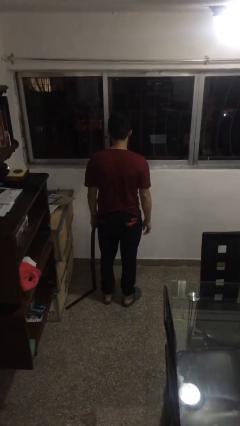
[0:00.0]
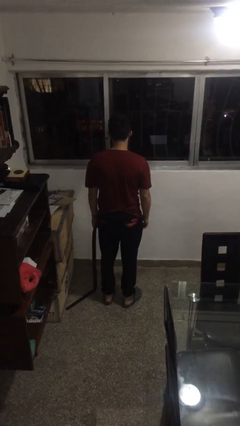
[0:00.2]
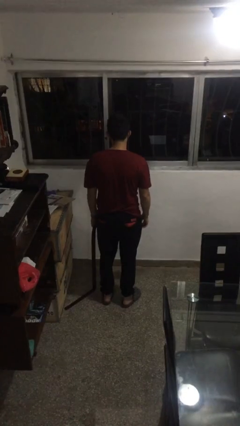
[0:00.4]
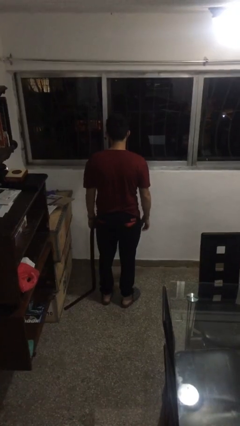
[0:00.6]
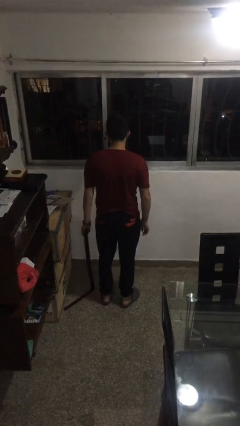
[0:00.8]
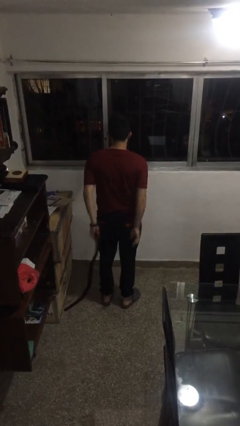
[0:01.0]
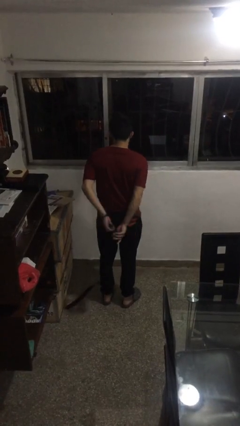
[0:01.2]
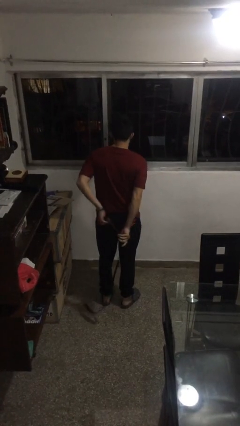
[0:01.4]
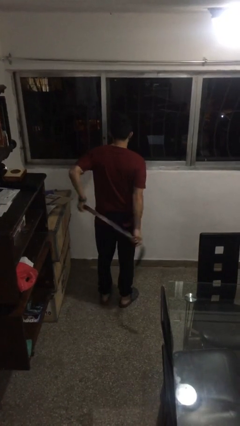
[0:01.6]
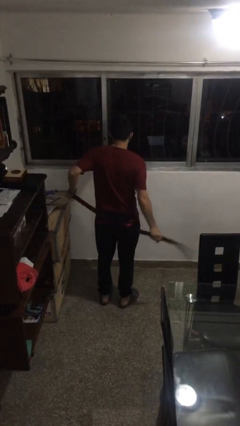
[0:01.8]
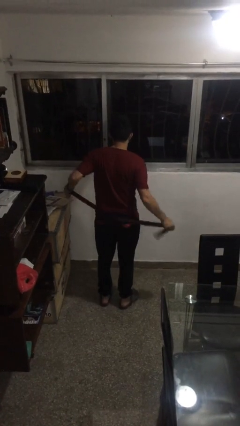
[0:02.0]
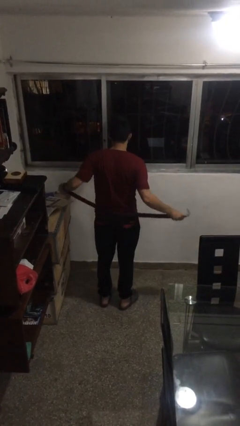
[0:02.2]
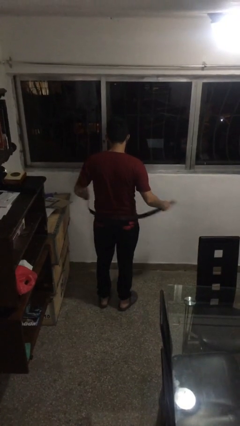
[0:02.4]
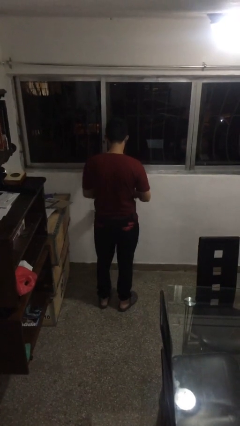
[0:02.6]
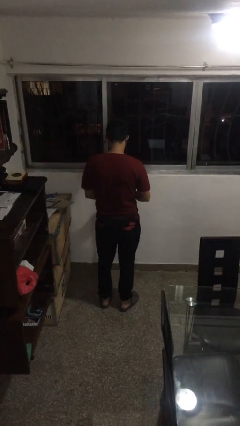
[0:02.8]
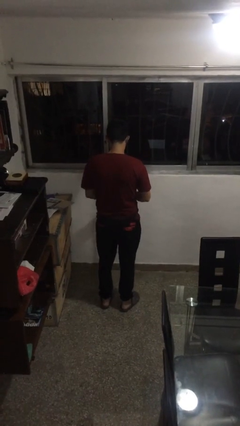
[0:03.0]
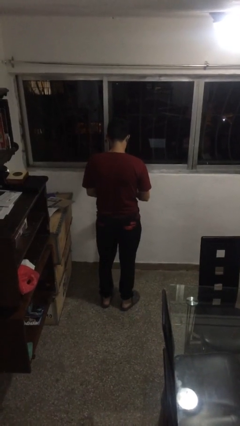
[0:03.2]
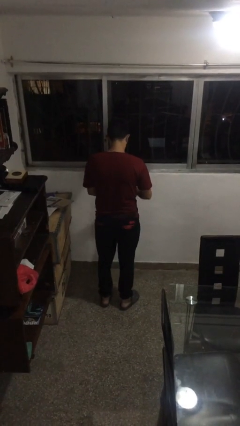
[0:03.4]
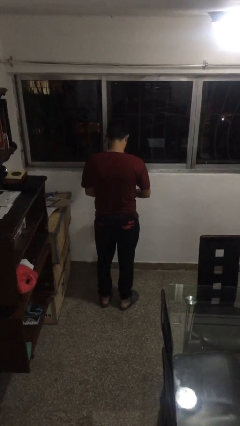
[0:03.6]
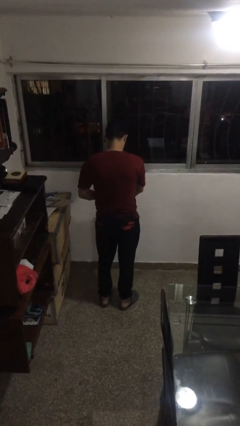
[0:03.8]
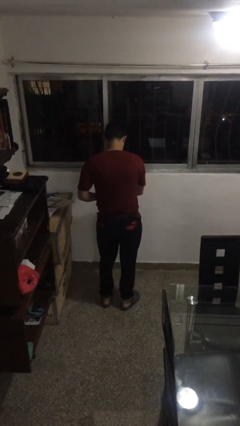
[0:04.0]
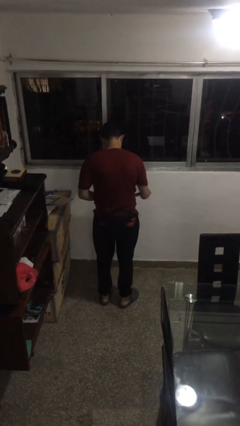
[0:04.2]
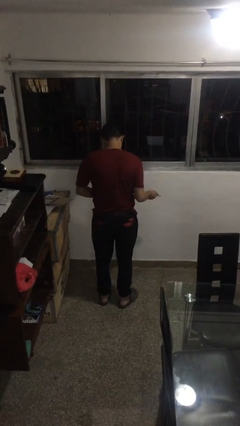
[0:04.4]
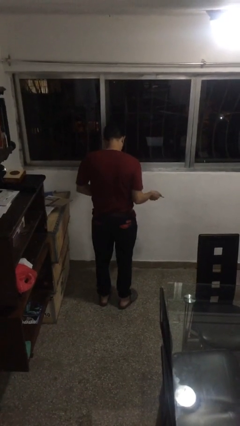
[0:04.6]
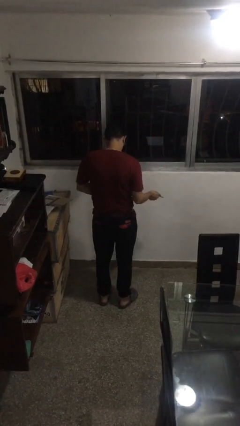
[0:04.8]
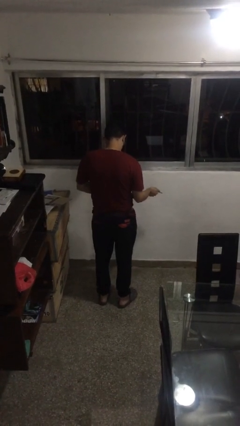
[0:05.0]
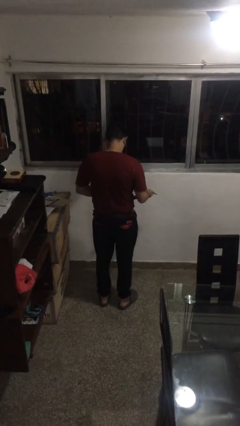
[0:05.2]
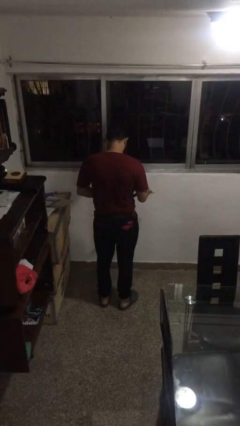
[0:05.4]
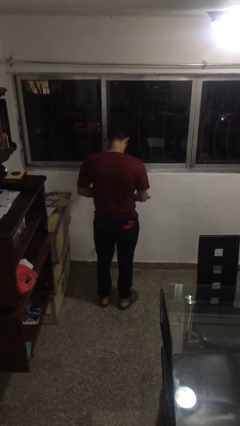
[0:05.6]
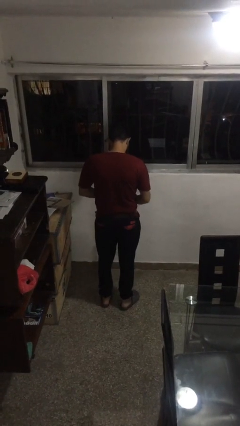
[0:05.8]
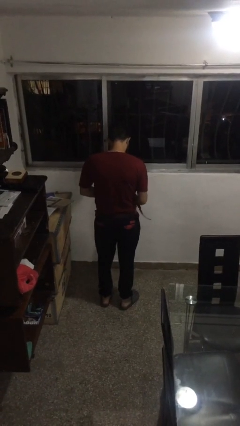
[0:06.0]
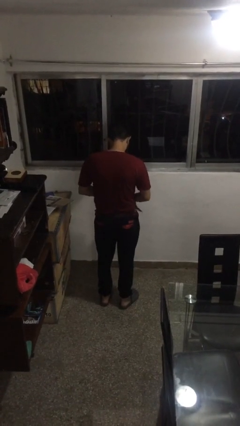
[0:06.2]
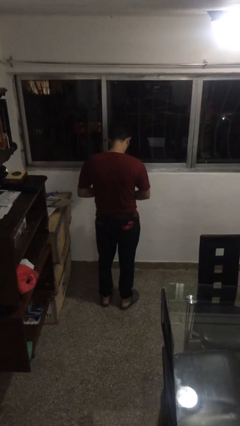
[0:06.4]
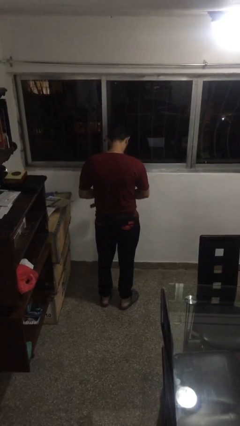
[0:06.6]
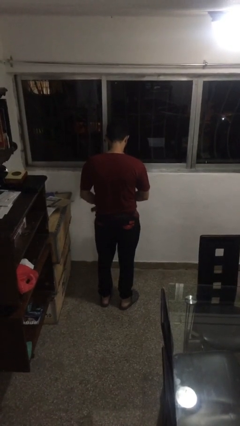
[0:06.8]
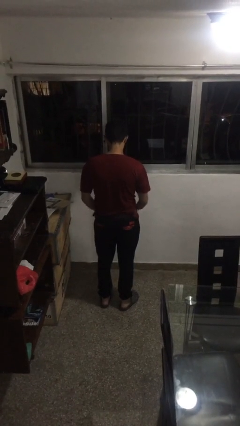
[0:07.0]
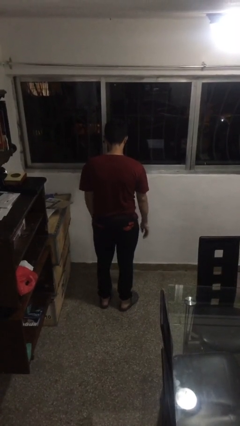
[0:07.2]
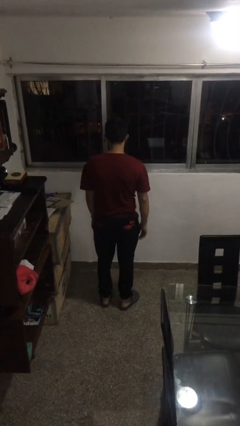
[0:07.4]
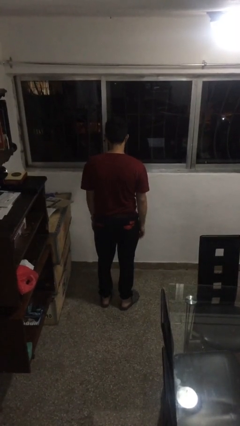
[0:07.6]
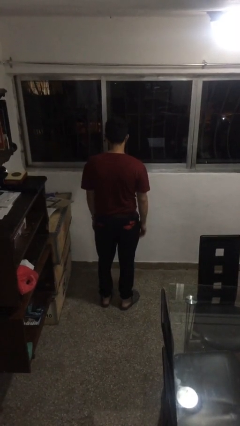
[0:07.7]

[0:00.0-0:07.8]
person puts on belt

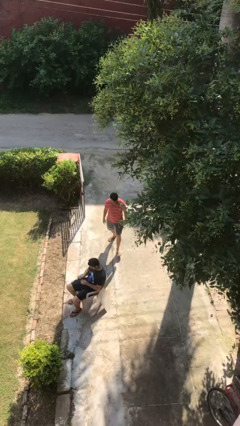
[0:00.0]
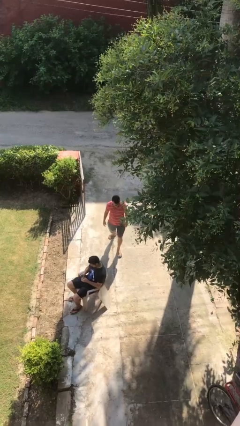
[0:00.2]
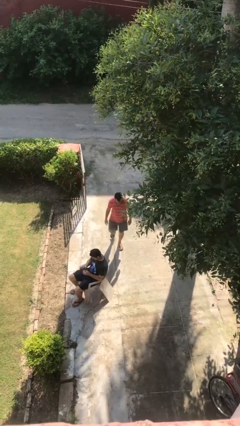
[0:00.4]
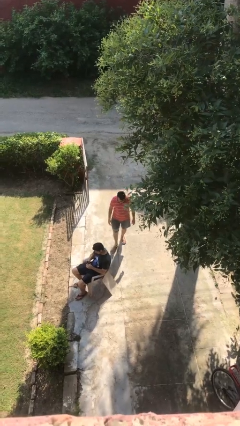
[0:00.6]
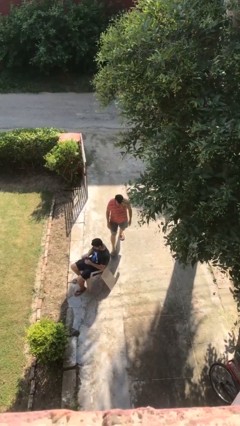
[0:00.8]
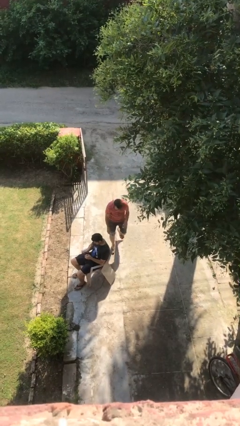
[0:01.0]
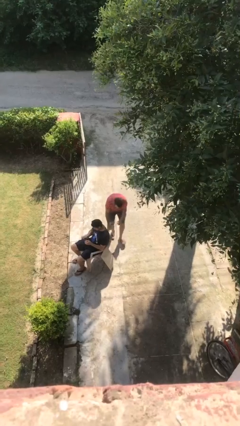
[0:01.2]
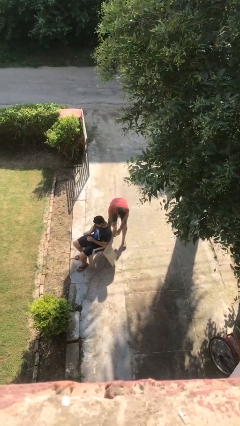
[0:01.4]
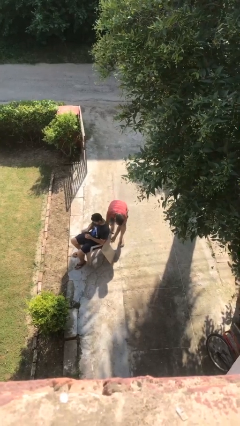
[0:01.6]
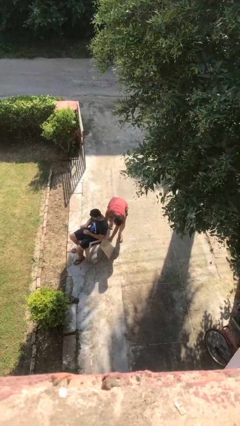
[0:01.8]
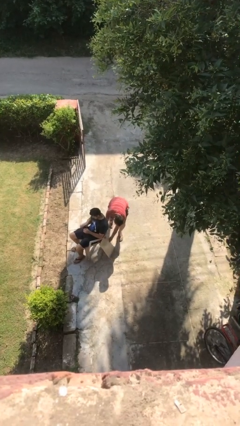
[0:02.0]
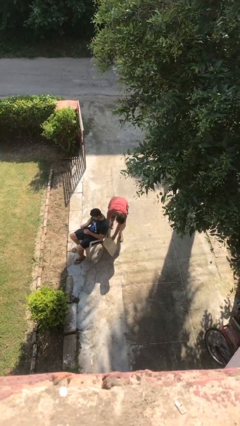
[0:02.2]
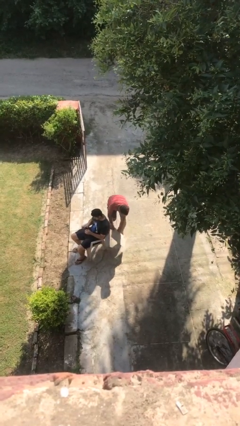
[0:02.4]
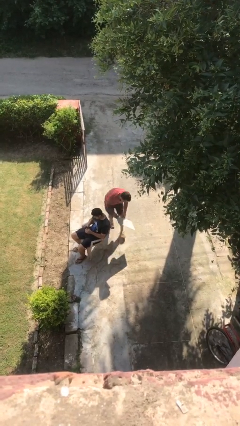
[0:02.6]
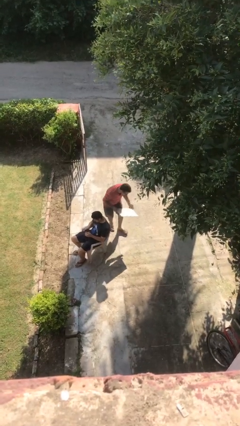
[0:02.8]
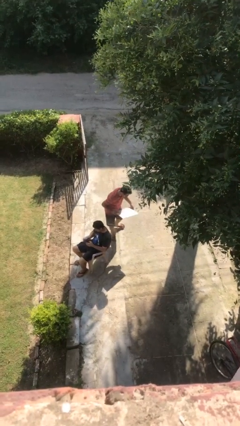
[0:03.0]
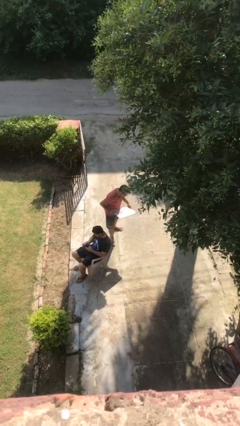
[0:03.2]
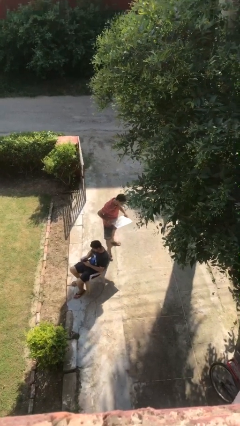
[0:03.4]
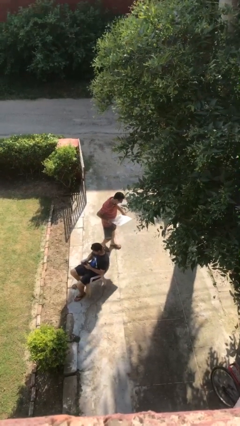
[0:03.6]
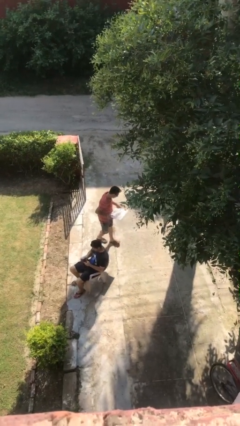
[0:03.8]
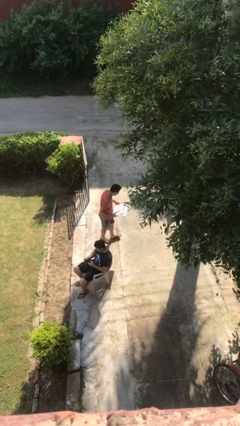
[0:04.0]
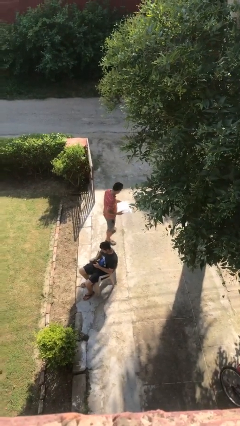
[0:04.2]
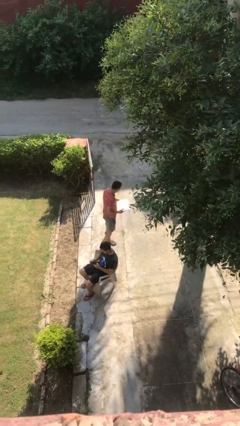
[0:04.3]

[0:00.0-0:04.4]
person steals object from person

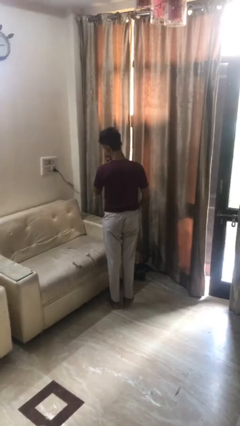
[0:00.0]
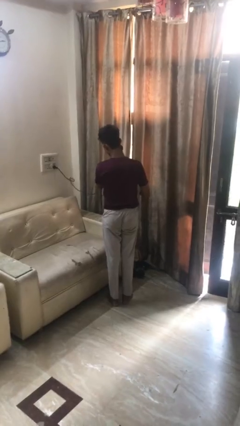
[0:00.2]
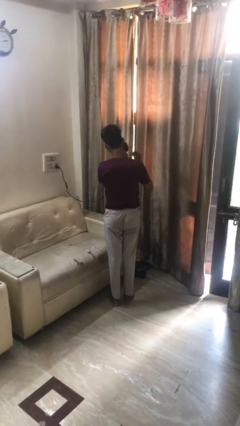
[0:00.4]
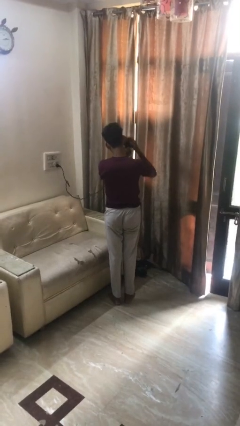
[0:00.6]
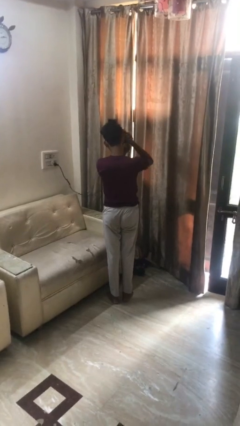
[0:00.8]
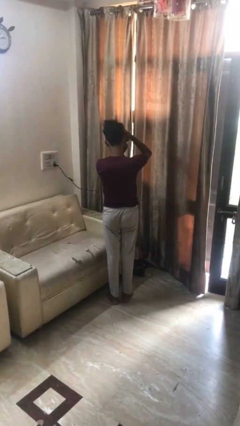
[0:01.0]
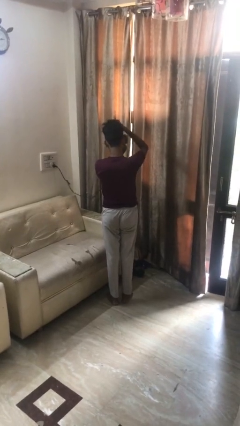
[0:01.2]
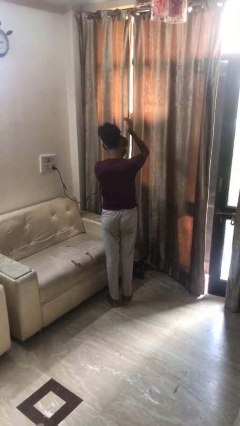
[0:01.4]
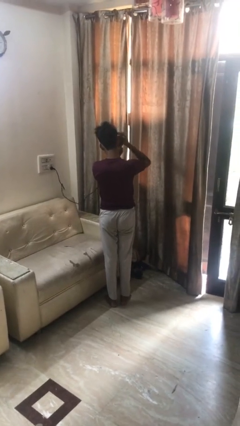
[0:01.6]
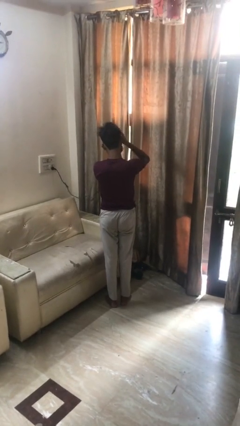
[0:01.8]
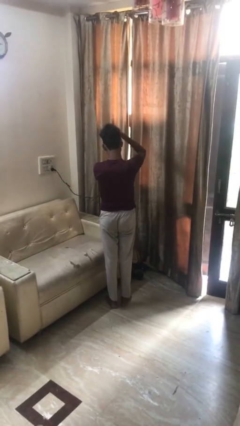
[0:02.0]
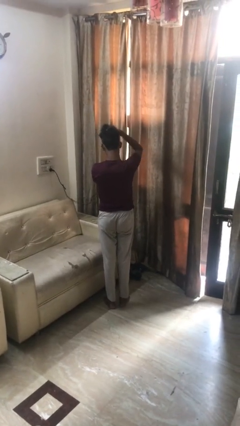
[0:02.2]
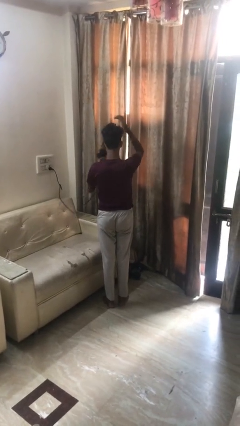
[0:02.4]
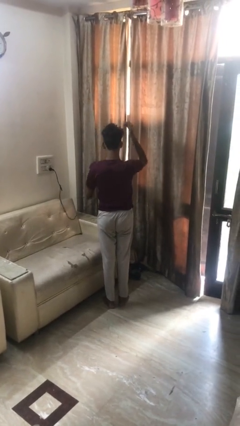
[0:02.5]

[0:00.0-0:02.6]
person dries hair with hairdryer

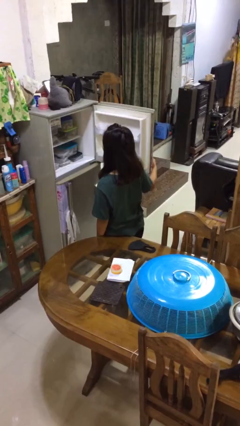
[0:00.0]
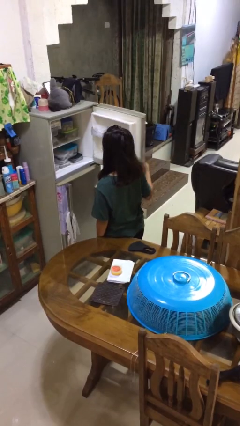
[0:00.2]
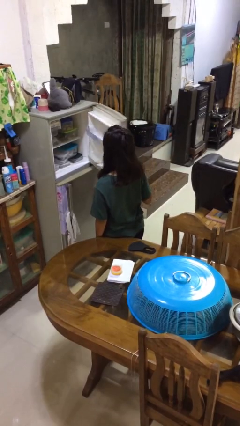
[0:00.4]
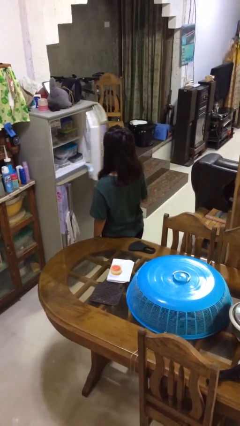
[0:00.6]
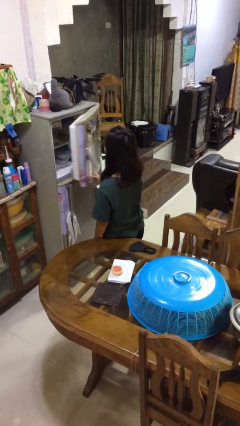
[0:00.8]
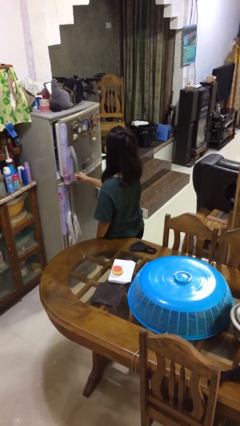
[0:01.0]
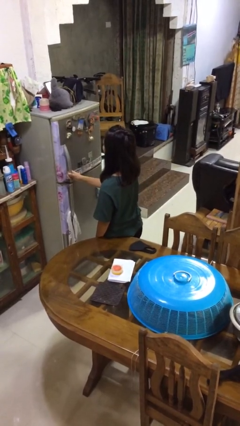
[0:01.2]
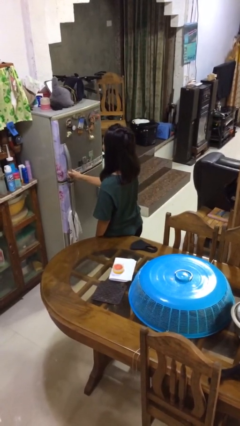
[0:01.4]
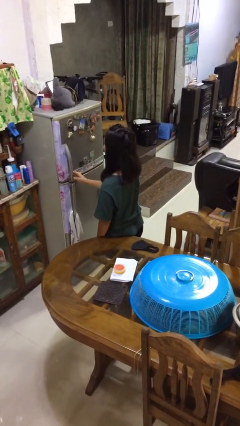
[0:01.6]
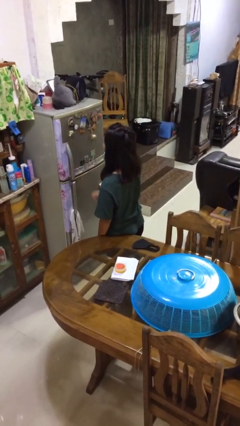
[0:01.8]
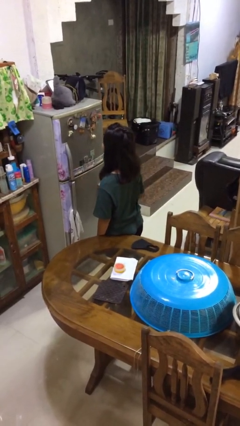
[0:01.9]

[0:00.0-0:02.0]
person closes refrigerator

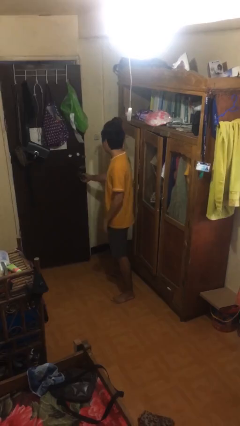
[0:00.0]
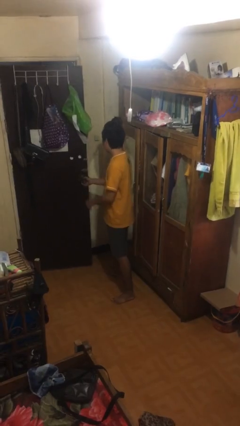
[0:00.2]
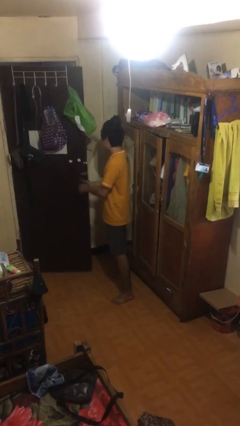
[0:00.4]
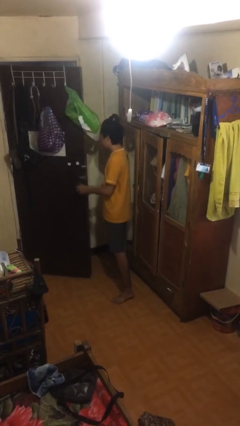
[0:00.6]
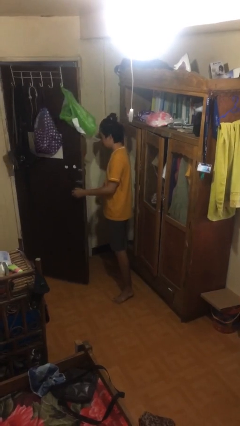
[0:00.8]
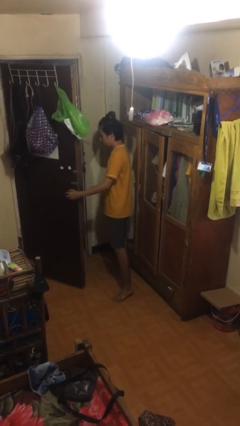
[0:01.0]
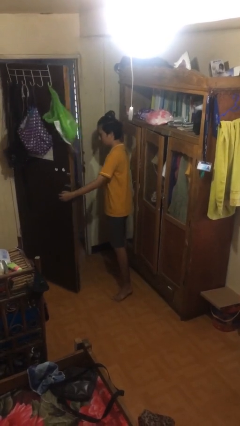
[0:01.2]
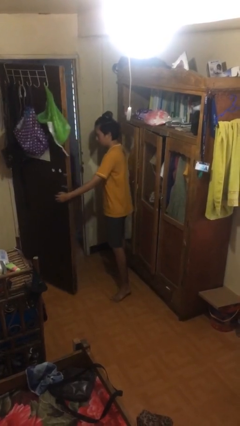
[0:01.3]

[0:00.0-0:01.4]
person opens facility door
